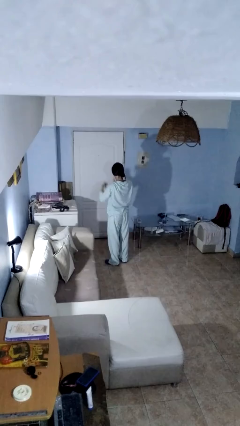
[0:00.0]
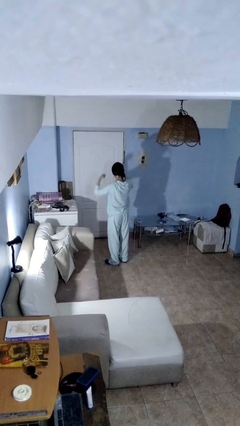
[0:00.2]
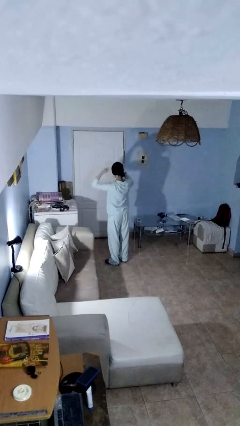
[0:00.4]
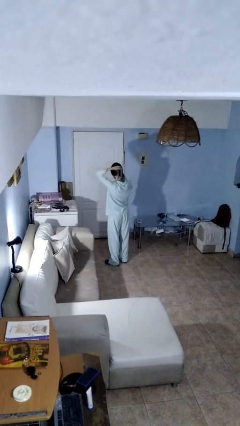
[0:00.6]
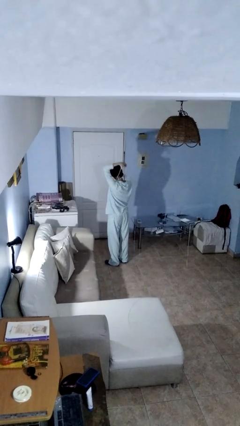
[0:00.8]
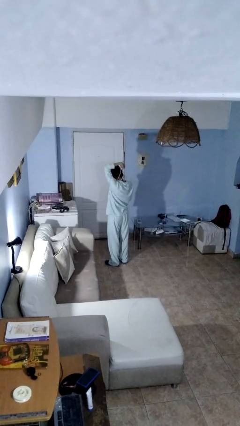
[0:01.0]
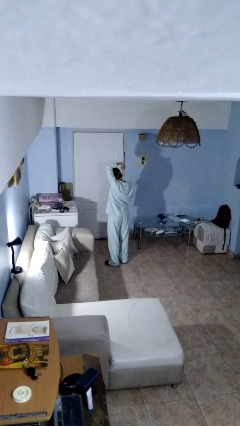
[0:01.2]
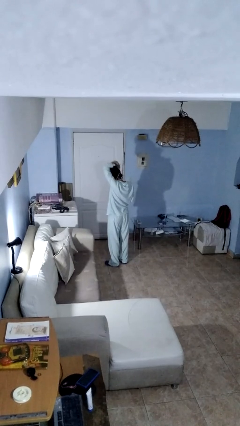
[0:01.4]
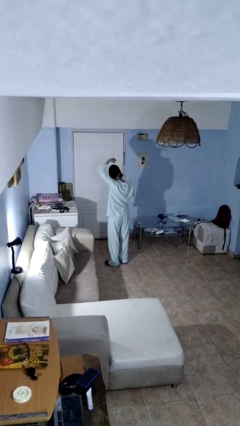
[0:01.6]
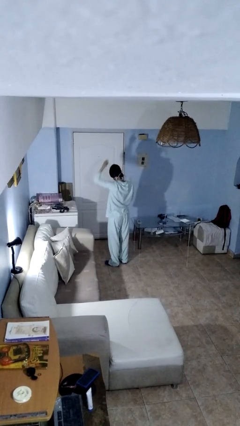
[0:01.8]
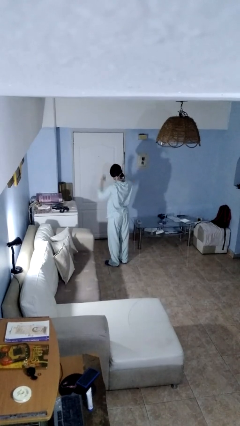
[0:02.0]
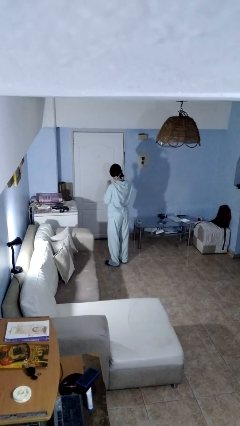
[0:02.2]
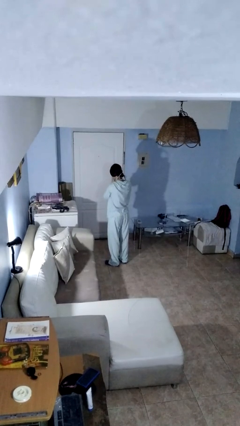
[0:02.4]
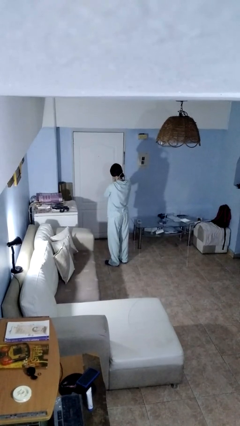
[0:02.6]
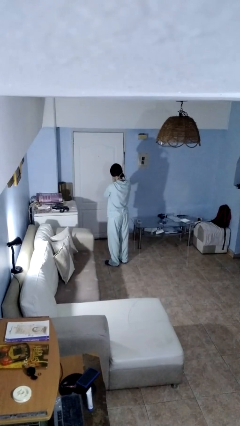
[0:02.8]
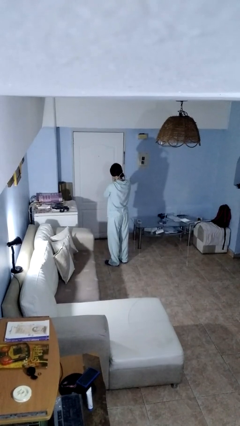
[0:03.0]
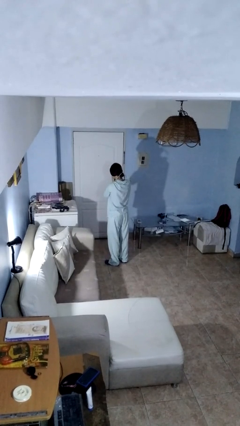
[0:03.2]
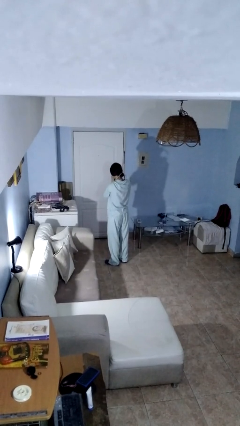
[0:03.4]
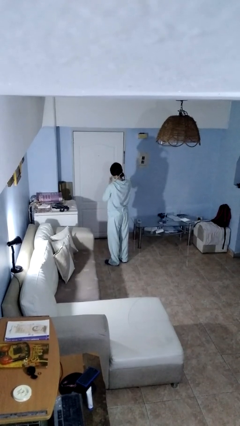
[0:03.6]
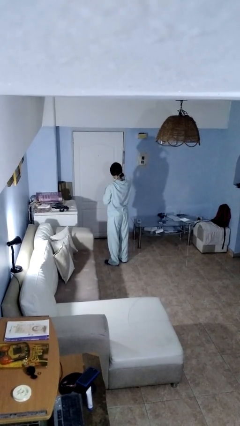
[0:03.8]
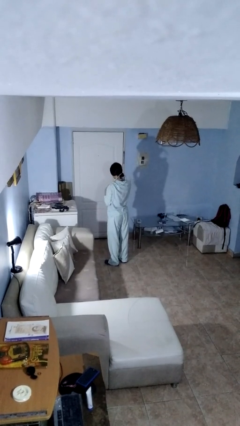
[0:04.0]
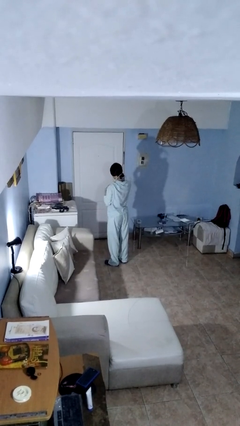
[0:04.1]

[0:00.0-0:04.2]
person puts on necklace

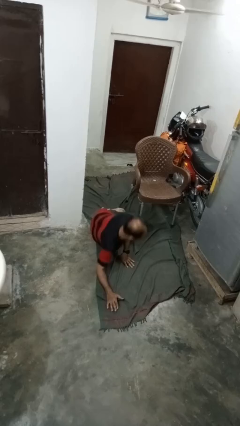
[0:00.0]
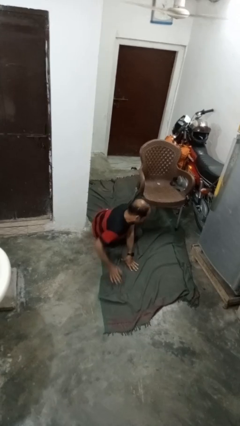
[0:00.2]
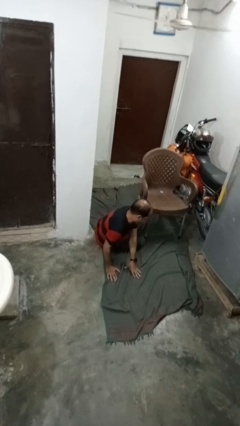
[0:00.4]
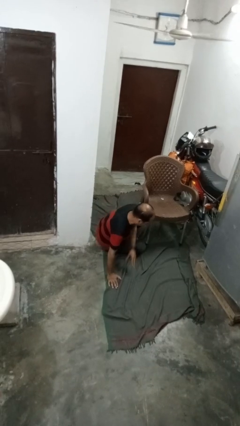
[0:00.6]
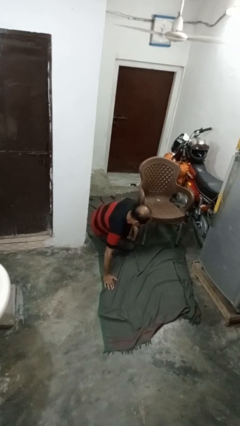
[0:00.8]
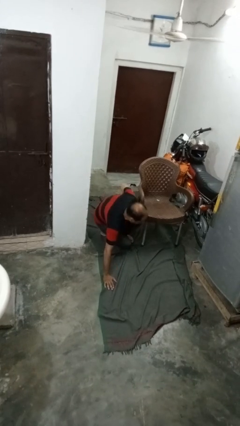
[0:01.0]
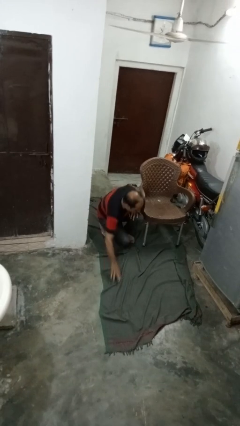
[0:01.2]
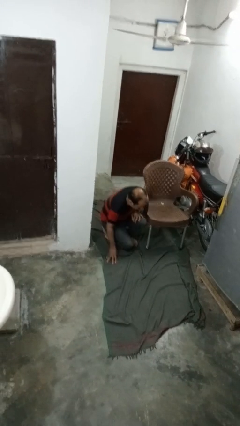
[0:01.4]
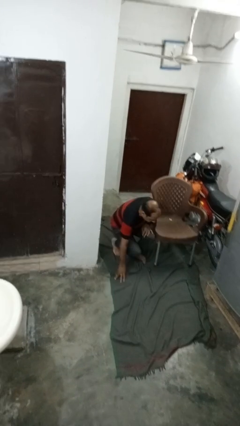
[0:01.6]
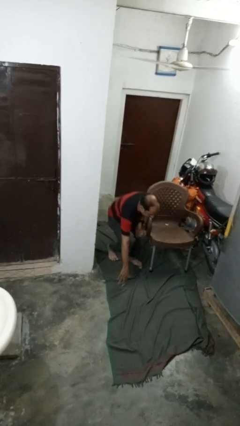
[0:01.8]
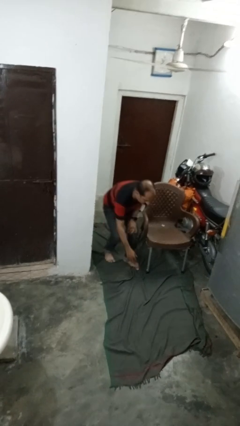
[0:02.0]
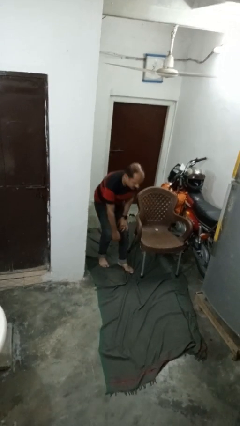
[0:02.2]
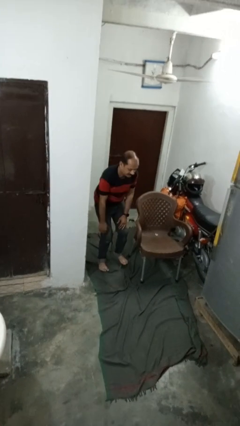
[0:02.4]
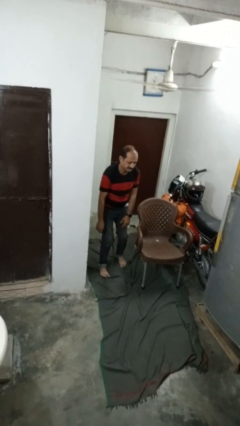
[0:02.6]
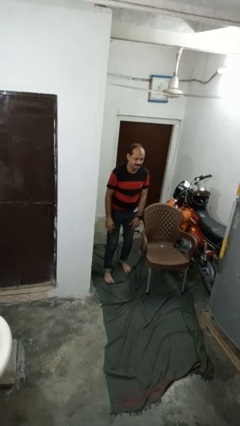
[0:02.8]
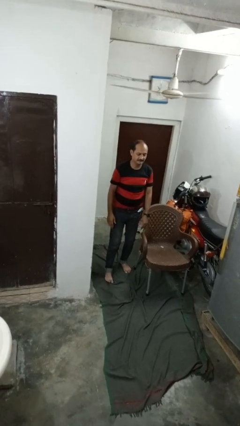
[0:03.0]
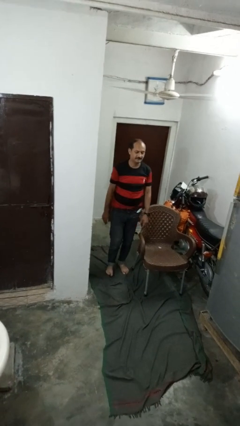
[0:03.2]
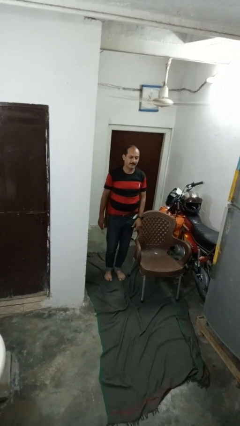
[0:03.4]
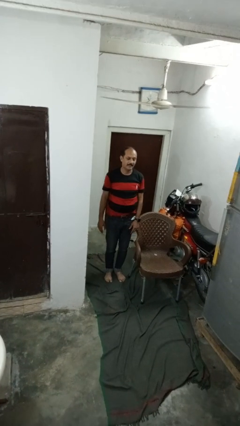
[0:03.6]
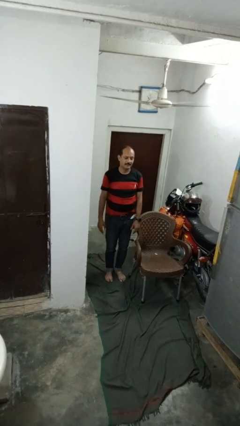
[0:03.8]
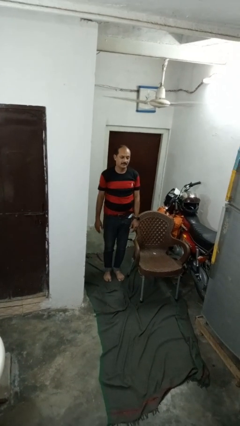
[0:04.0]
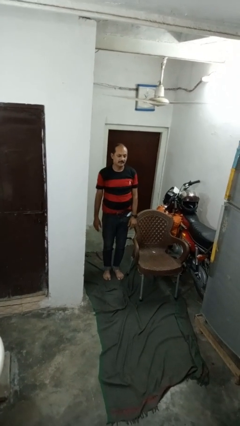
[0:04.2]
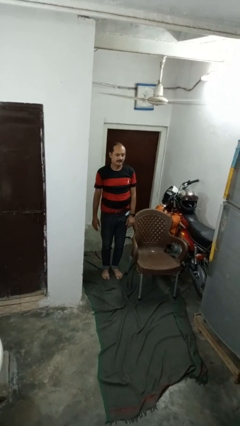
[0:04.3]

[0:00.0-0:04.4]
person stands up from floor

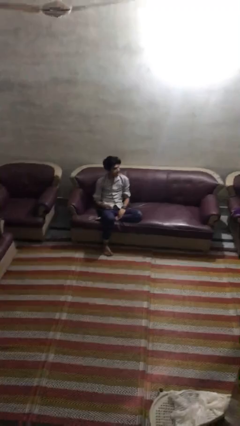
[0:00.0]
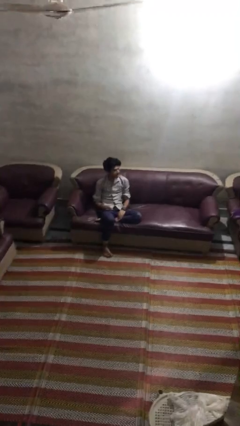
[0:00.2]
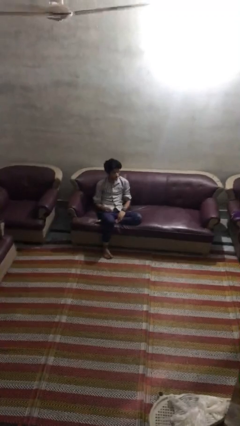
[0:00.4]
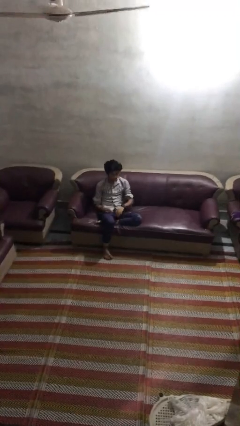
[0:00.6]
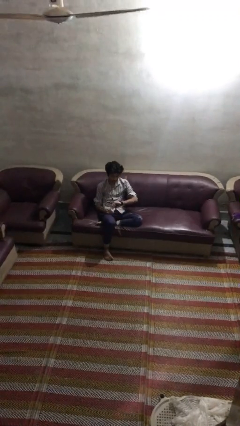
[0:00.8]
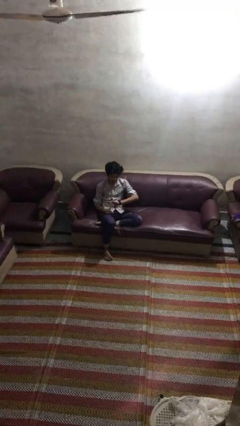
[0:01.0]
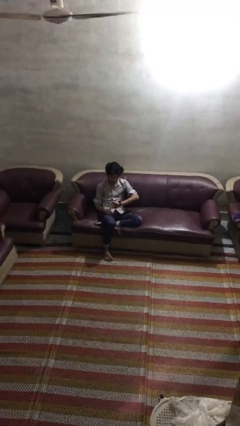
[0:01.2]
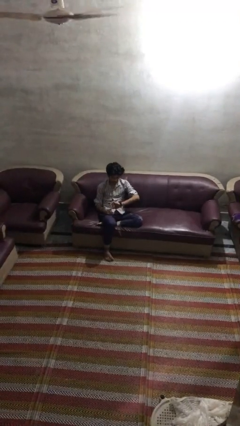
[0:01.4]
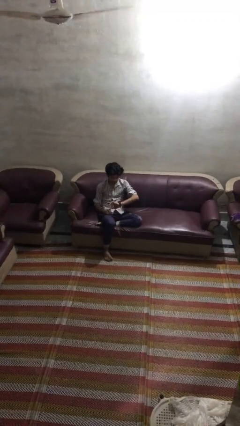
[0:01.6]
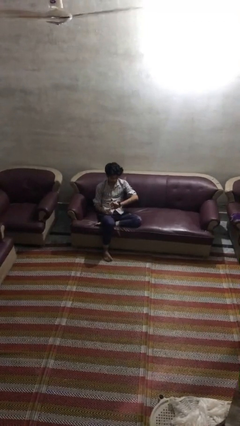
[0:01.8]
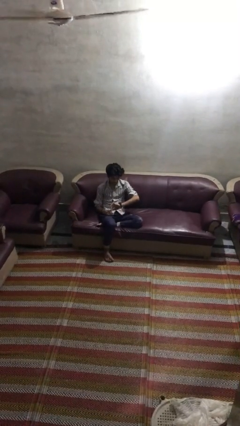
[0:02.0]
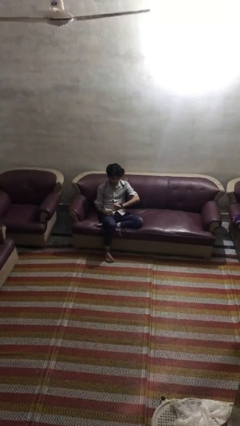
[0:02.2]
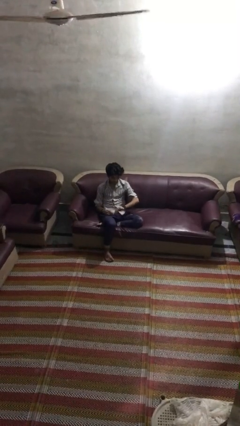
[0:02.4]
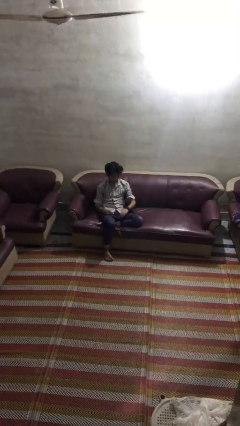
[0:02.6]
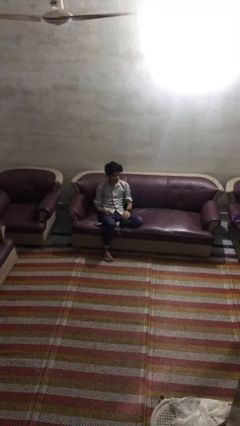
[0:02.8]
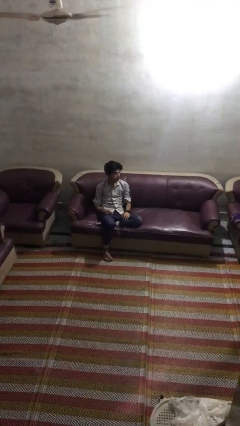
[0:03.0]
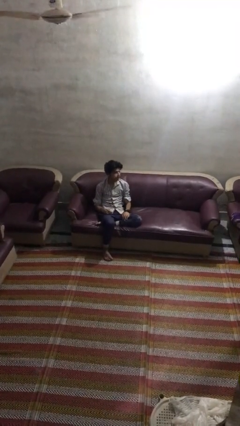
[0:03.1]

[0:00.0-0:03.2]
person looks at wristwatch

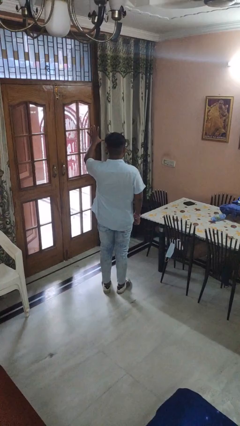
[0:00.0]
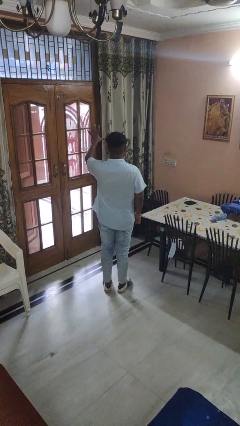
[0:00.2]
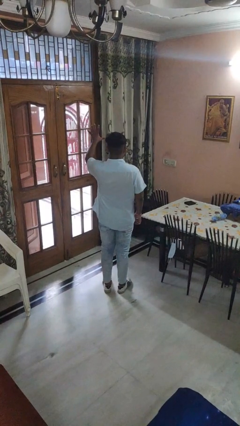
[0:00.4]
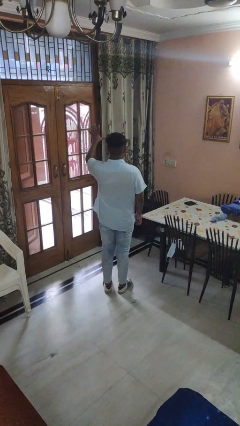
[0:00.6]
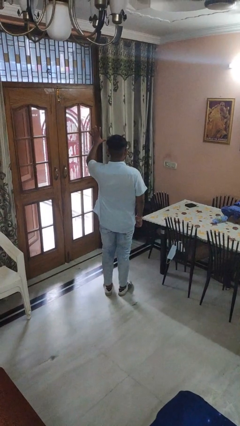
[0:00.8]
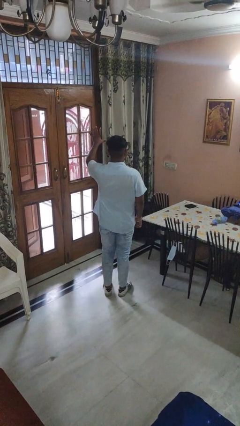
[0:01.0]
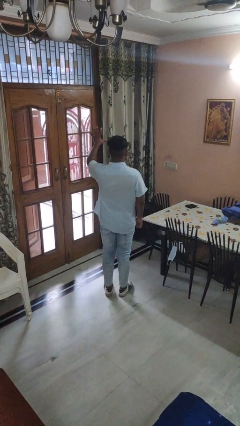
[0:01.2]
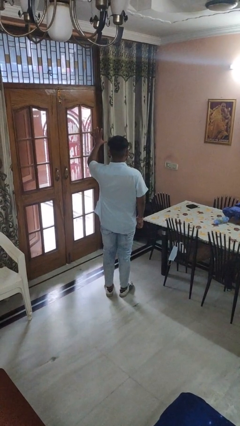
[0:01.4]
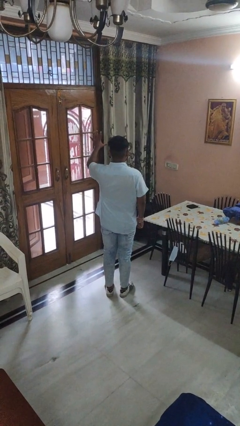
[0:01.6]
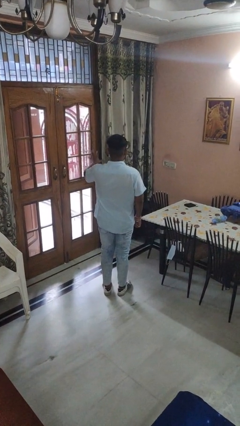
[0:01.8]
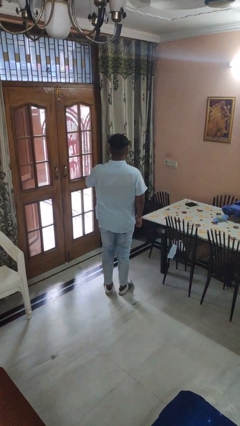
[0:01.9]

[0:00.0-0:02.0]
person gestures number five

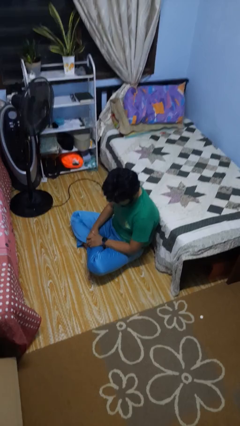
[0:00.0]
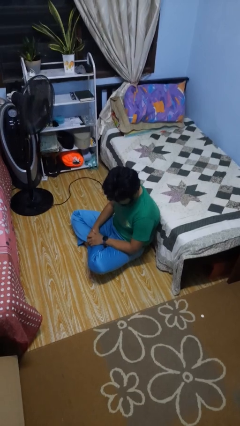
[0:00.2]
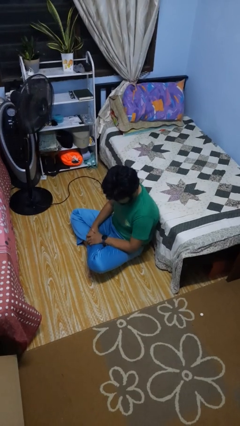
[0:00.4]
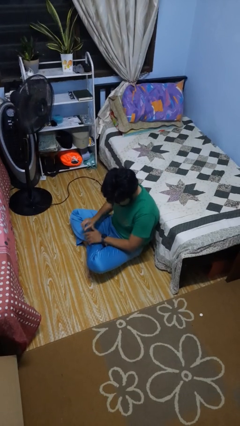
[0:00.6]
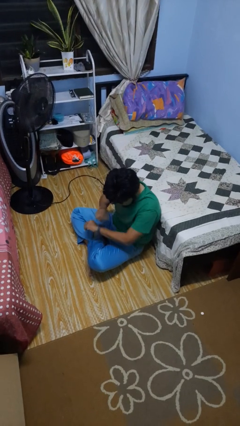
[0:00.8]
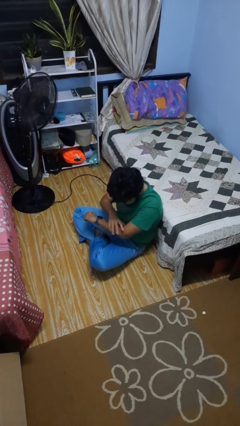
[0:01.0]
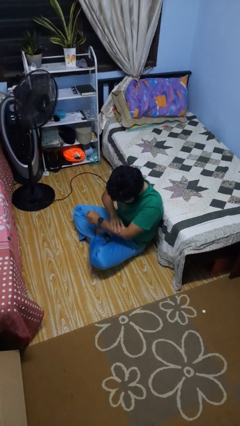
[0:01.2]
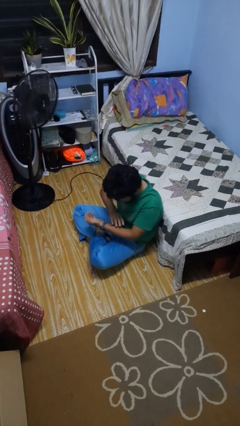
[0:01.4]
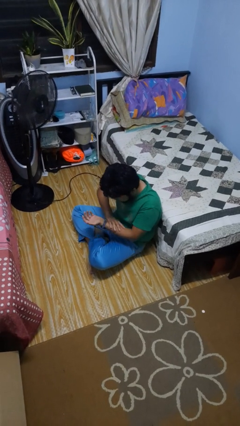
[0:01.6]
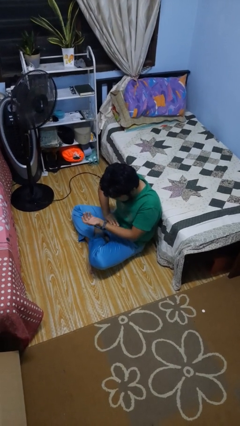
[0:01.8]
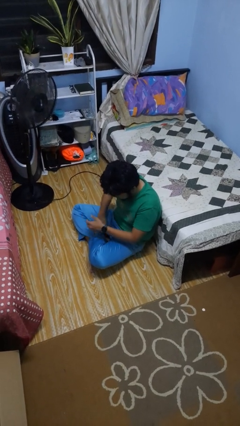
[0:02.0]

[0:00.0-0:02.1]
person looks at hands in lap

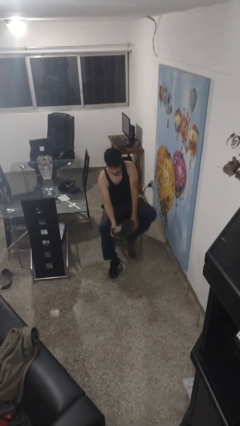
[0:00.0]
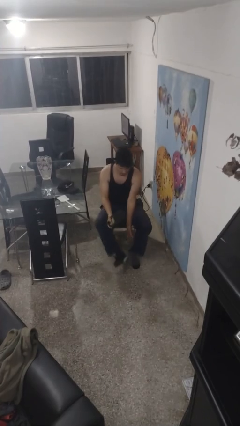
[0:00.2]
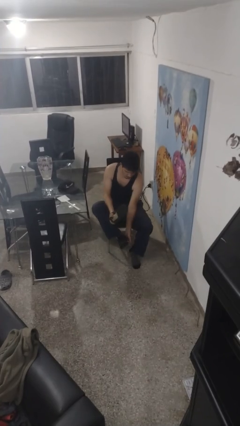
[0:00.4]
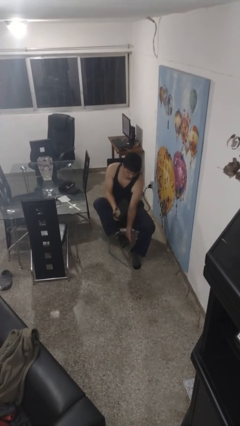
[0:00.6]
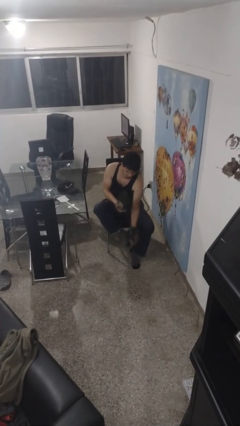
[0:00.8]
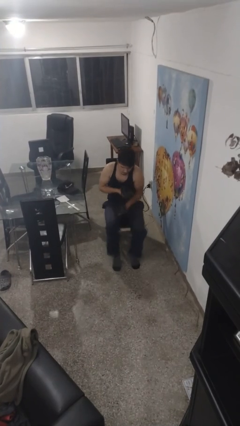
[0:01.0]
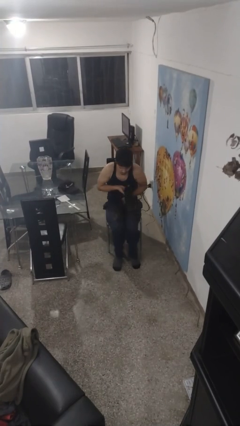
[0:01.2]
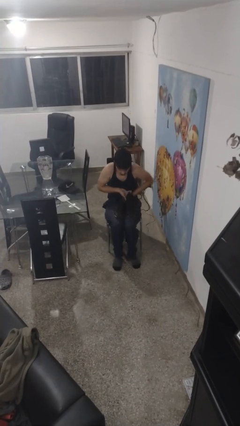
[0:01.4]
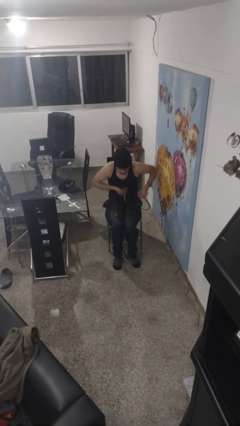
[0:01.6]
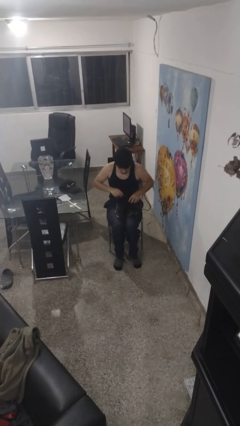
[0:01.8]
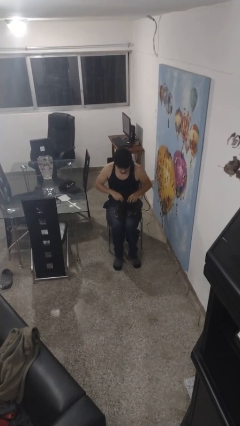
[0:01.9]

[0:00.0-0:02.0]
person takes off shoes
